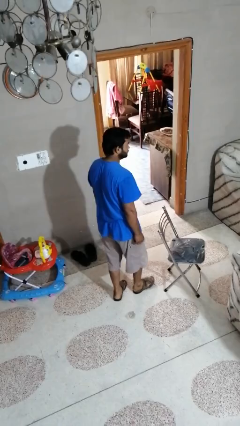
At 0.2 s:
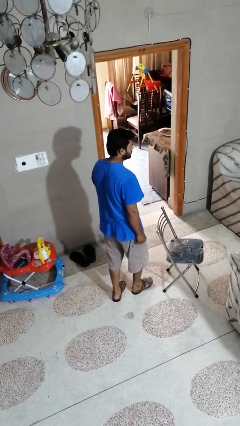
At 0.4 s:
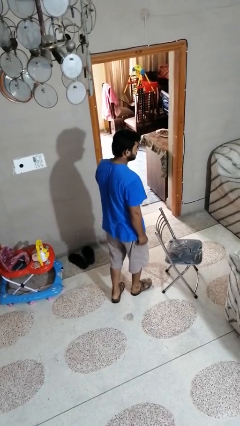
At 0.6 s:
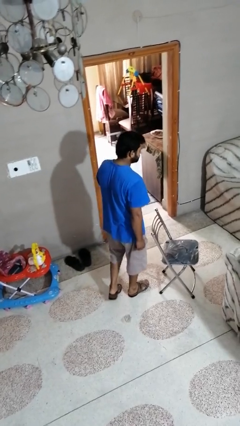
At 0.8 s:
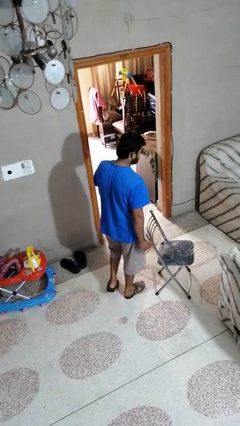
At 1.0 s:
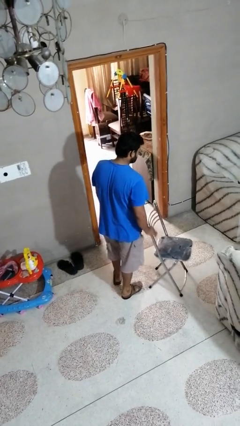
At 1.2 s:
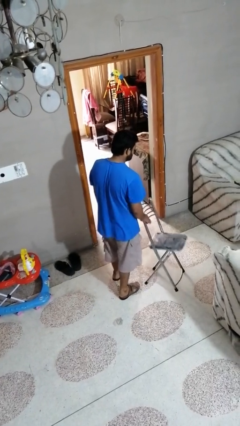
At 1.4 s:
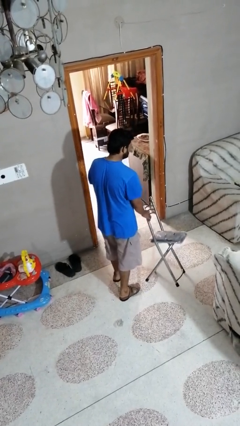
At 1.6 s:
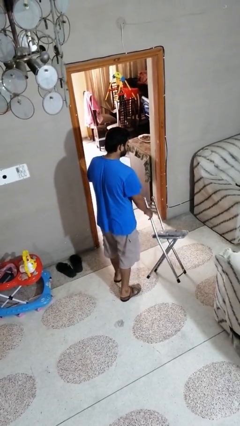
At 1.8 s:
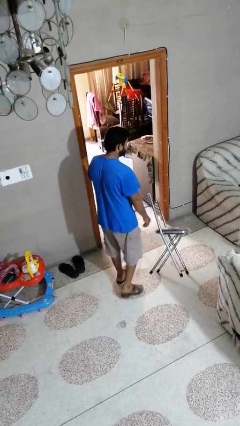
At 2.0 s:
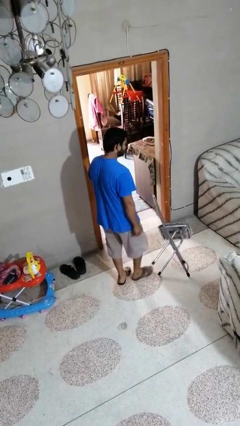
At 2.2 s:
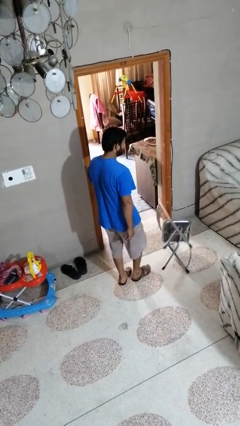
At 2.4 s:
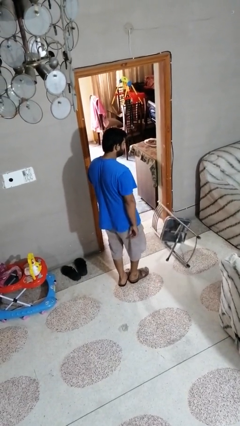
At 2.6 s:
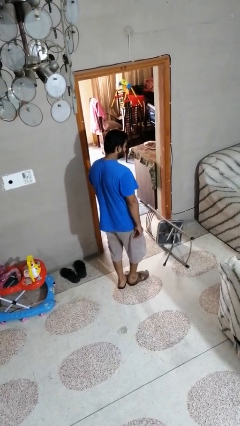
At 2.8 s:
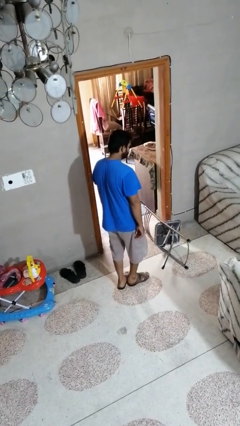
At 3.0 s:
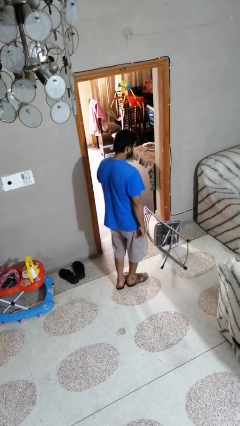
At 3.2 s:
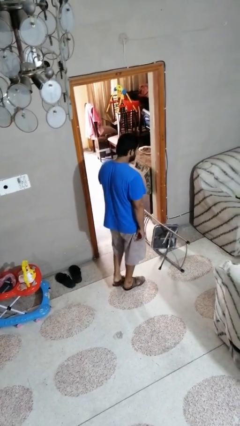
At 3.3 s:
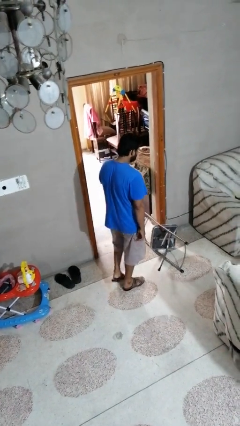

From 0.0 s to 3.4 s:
person knocks over furniture

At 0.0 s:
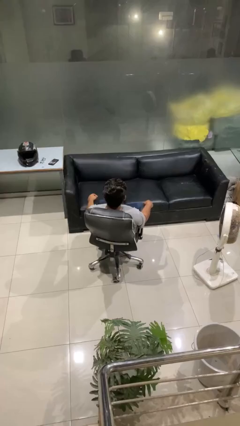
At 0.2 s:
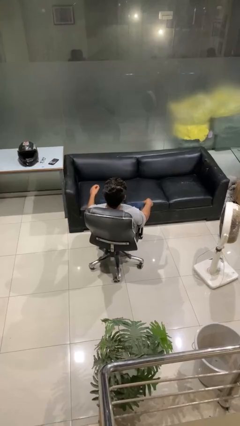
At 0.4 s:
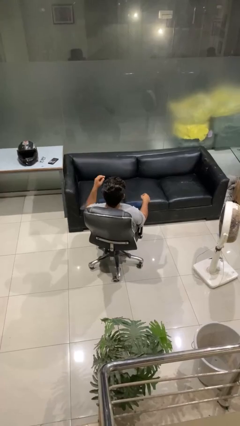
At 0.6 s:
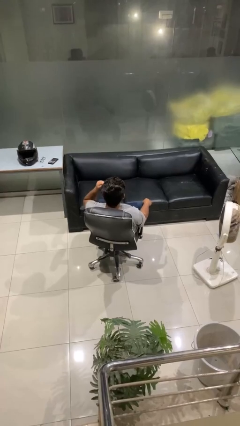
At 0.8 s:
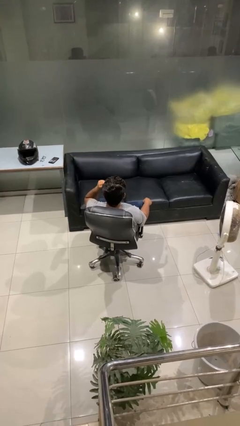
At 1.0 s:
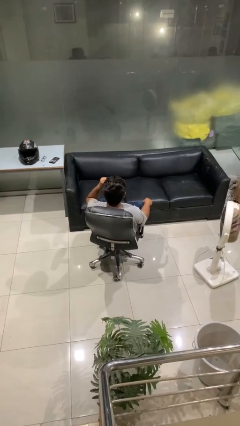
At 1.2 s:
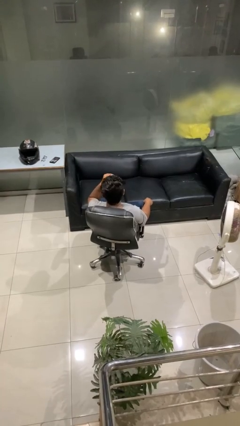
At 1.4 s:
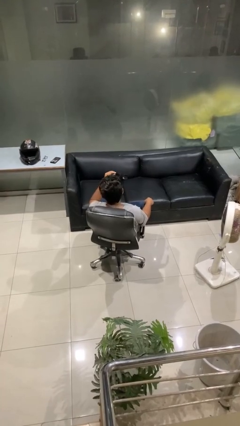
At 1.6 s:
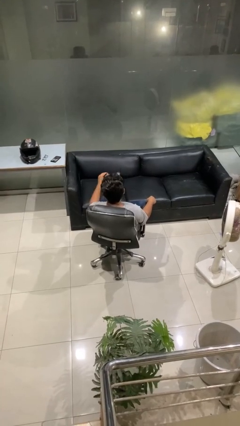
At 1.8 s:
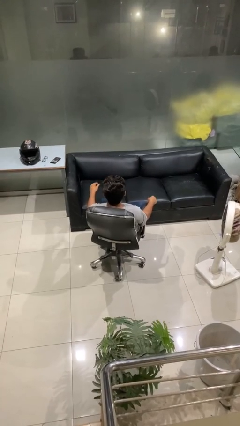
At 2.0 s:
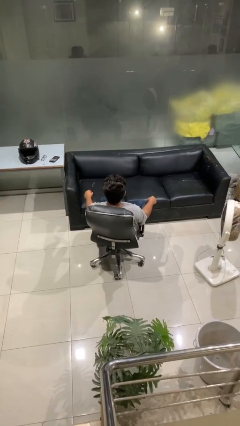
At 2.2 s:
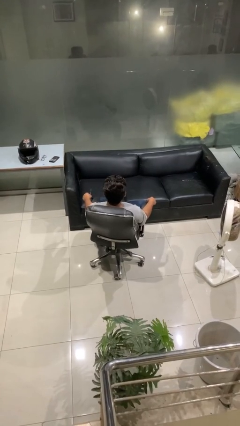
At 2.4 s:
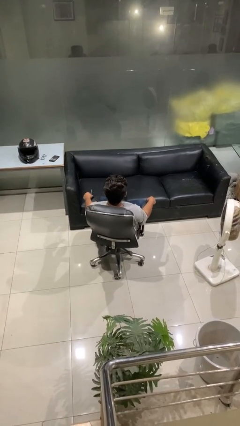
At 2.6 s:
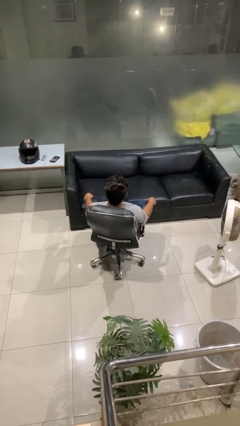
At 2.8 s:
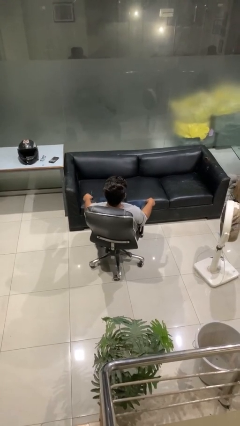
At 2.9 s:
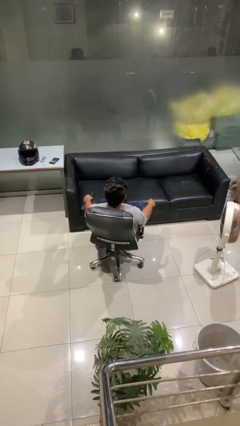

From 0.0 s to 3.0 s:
person takes off sunglasses

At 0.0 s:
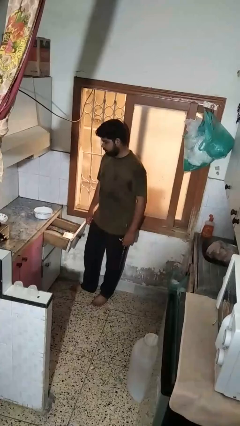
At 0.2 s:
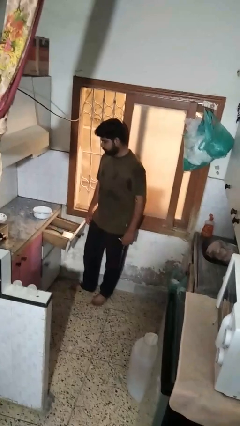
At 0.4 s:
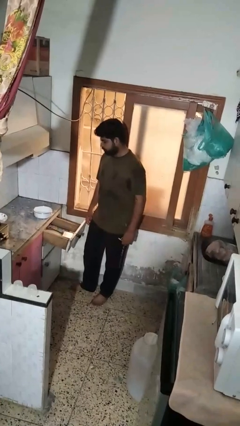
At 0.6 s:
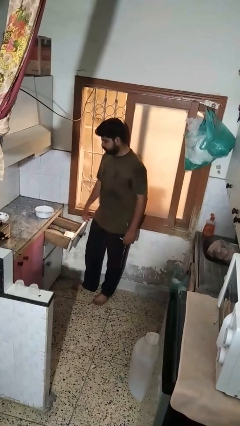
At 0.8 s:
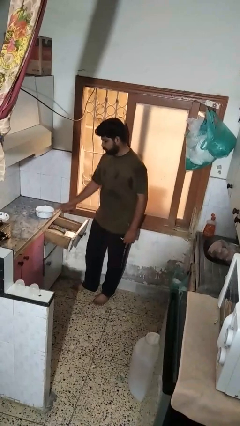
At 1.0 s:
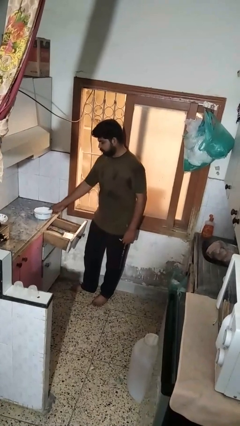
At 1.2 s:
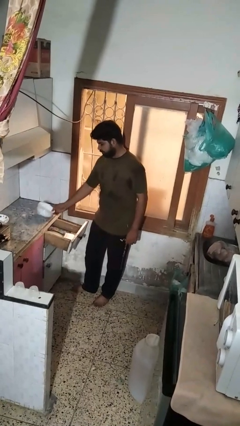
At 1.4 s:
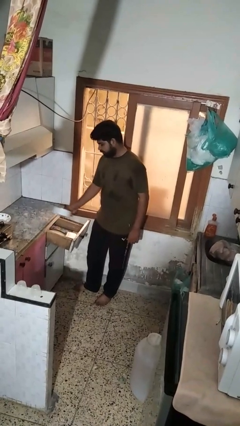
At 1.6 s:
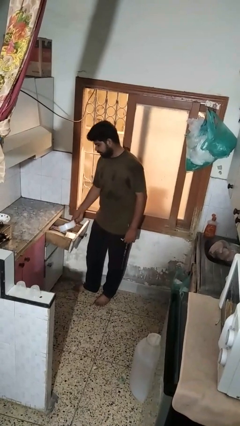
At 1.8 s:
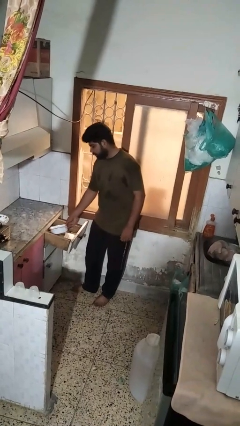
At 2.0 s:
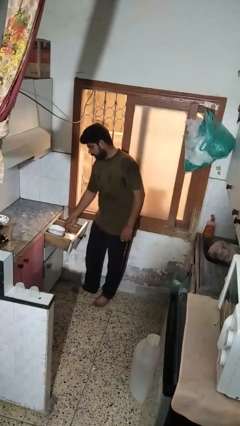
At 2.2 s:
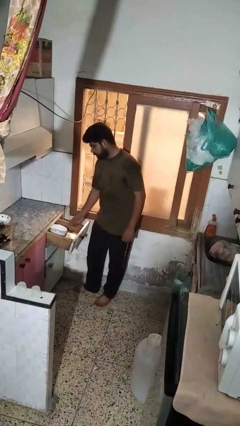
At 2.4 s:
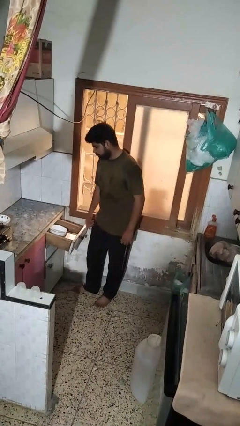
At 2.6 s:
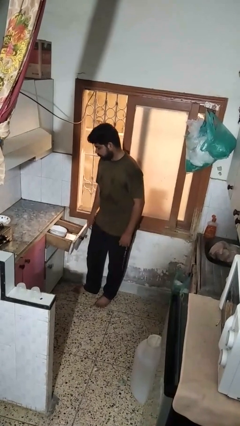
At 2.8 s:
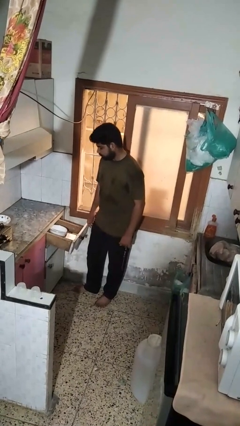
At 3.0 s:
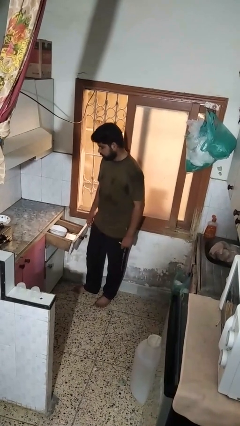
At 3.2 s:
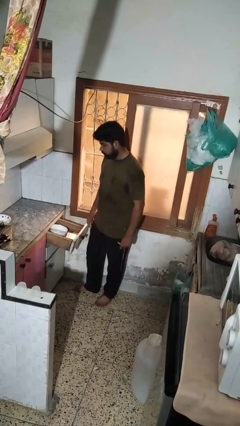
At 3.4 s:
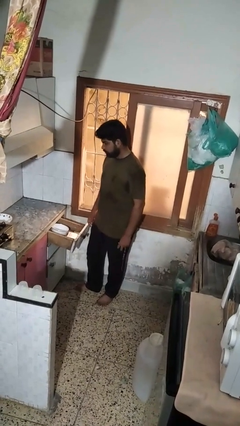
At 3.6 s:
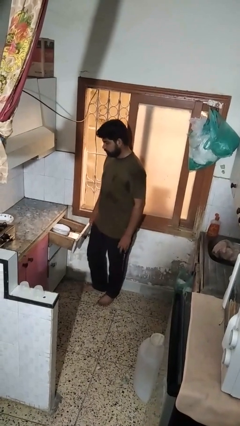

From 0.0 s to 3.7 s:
person puts object into kitchen drawer

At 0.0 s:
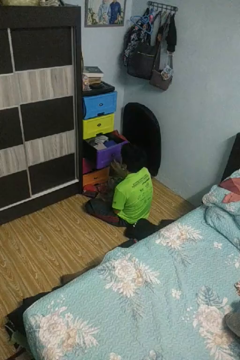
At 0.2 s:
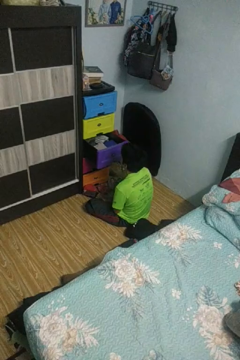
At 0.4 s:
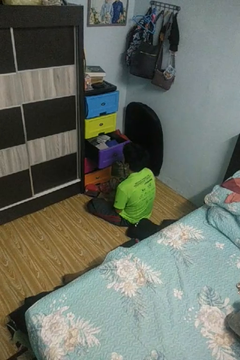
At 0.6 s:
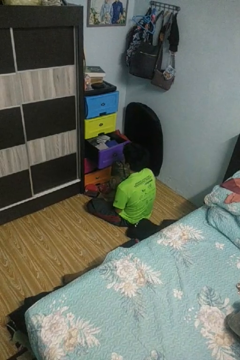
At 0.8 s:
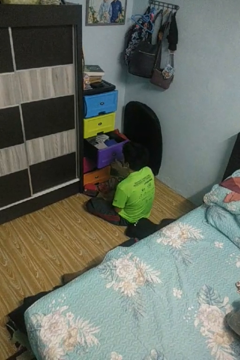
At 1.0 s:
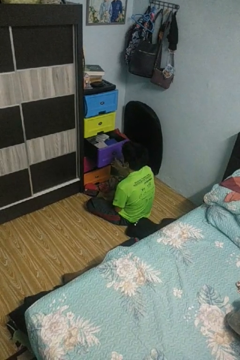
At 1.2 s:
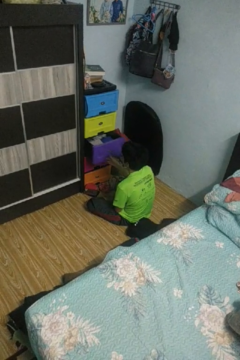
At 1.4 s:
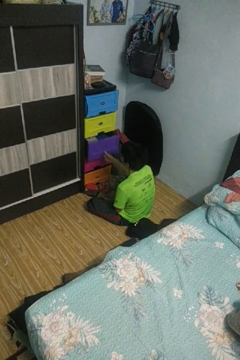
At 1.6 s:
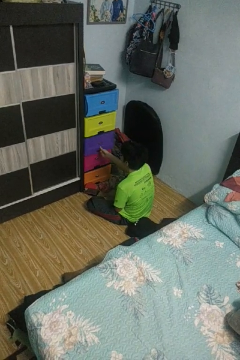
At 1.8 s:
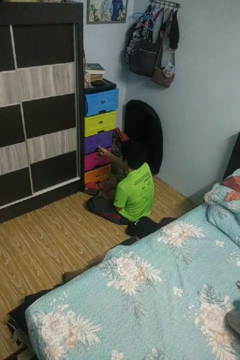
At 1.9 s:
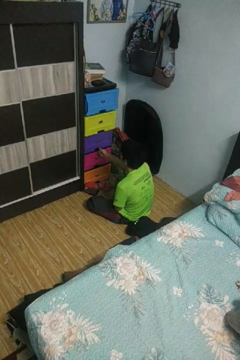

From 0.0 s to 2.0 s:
person closes dresser drawer

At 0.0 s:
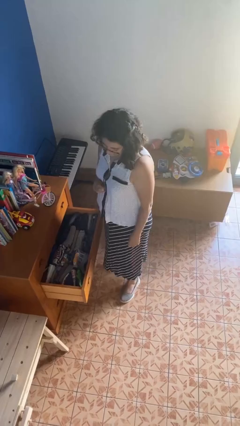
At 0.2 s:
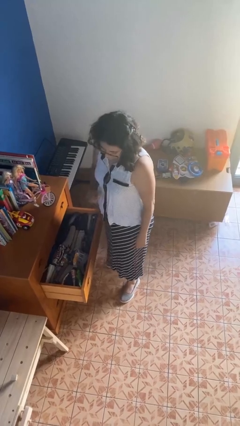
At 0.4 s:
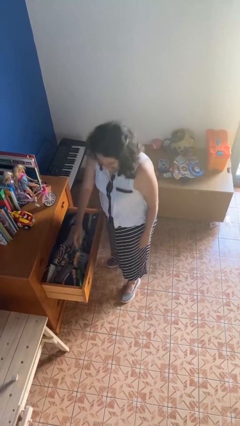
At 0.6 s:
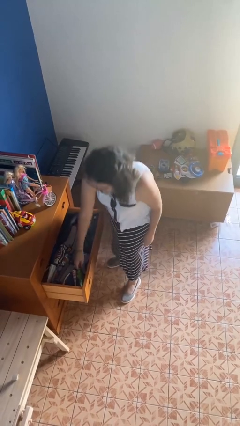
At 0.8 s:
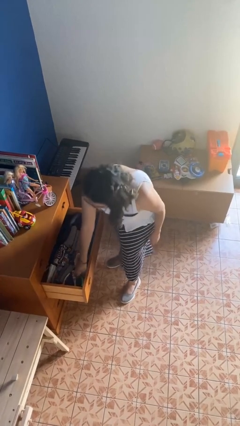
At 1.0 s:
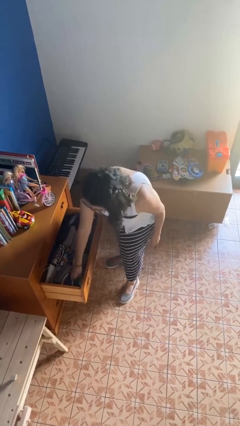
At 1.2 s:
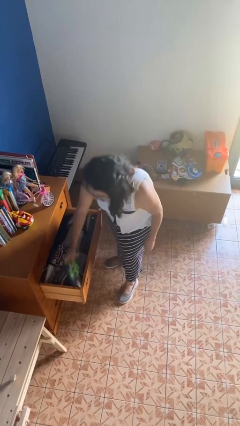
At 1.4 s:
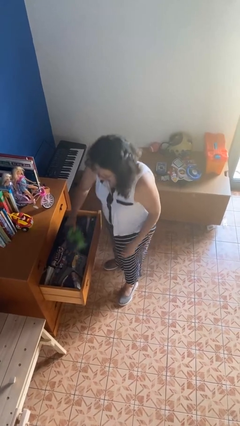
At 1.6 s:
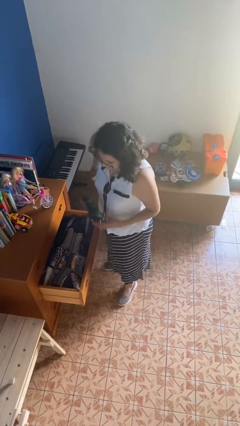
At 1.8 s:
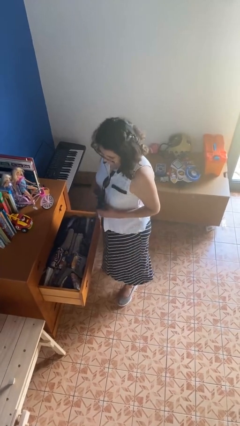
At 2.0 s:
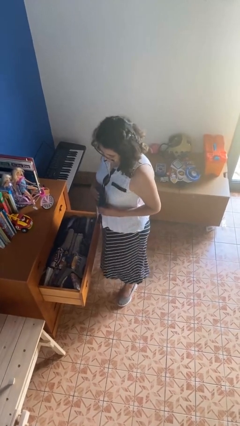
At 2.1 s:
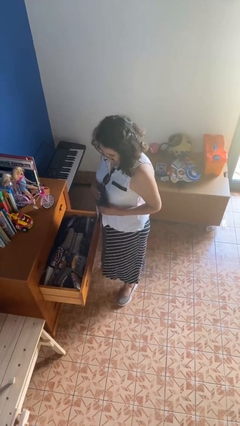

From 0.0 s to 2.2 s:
person takes clothes from dresser

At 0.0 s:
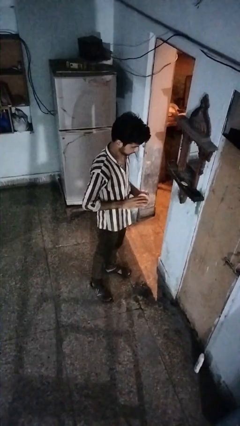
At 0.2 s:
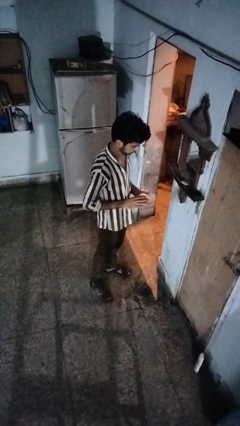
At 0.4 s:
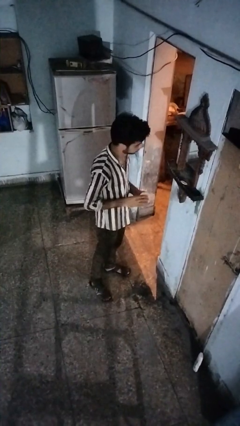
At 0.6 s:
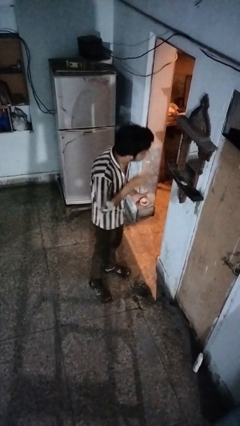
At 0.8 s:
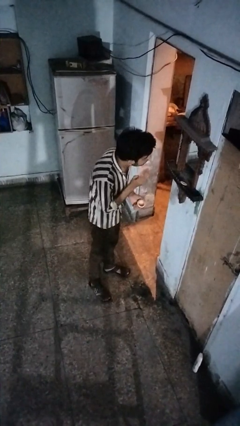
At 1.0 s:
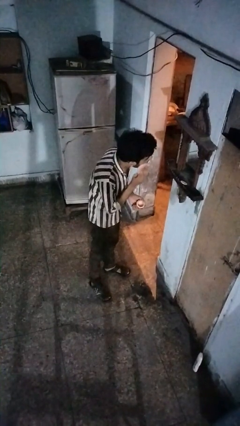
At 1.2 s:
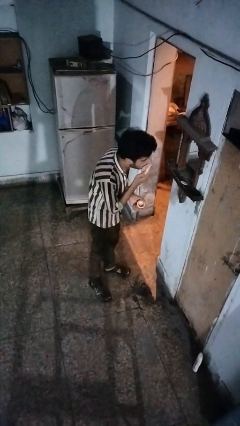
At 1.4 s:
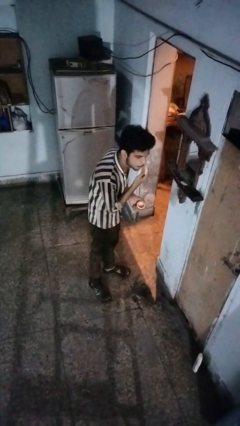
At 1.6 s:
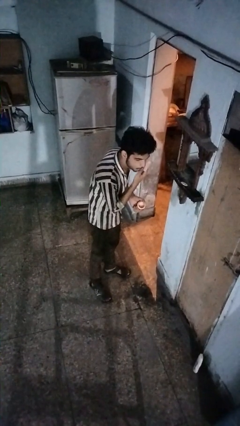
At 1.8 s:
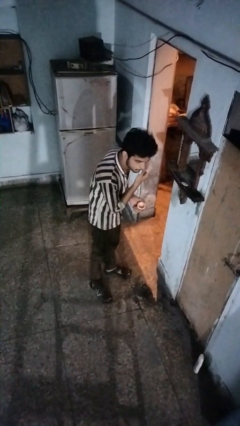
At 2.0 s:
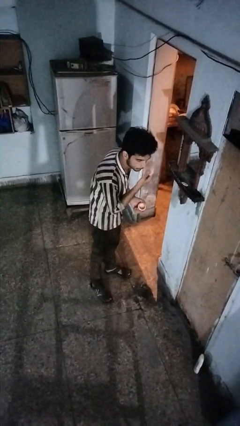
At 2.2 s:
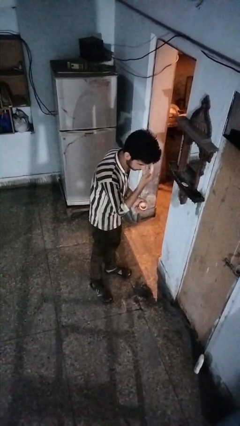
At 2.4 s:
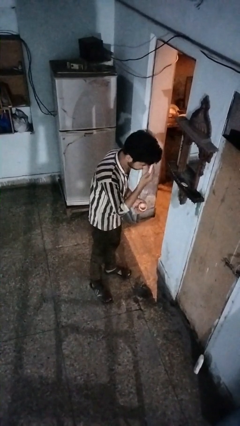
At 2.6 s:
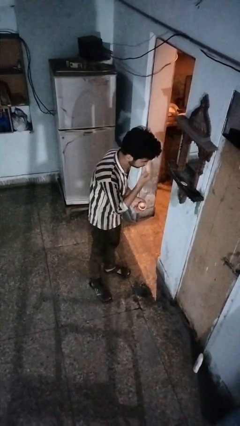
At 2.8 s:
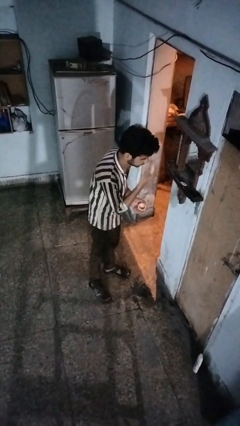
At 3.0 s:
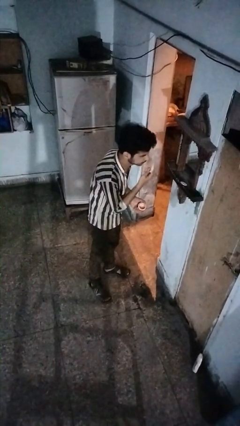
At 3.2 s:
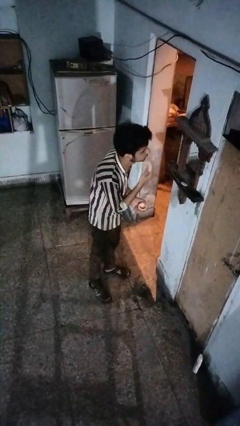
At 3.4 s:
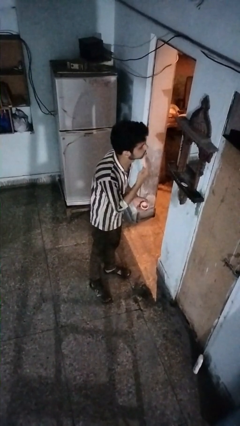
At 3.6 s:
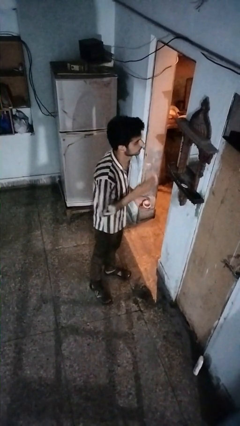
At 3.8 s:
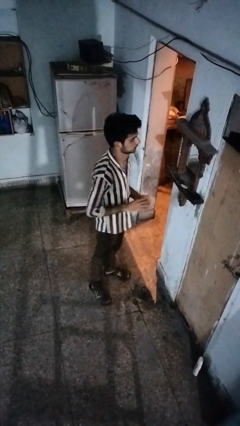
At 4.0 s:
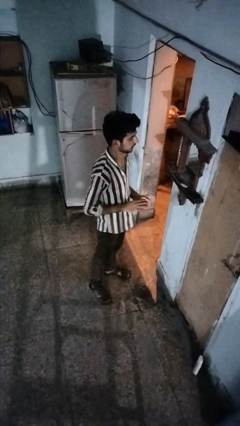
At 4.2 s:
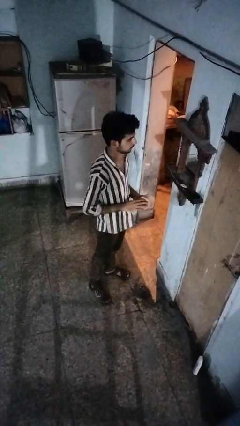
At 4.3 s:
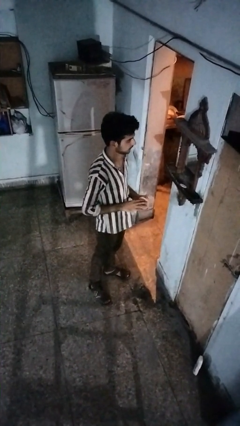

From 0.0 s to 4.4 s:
person applies foundation makeup
